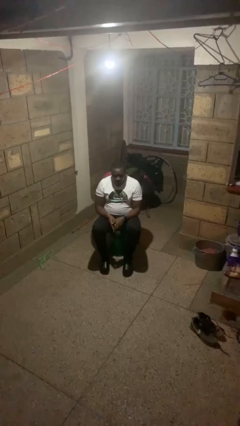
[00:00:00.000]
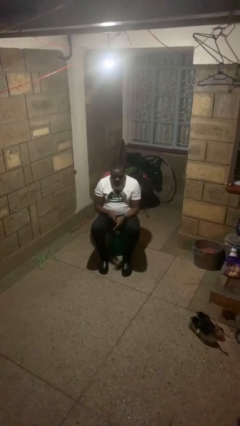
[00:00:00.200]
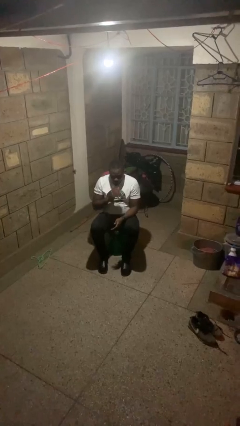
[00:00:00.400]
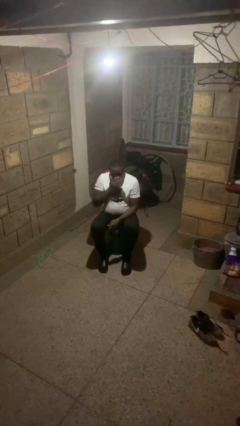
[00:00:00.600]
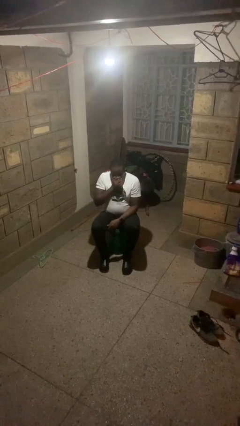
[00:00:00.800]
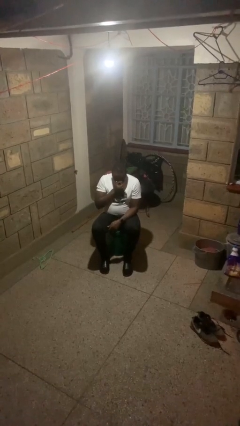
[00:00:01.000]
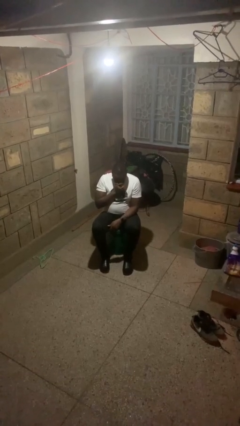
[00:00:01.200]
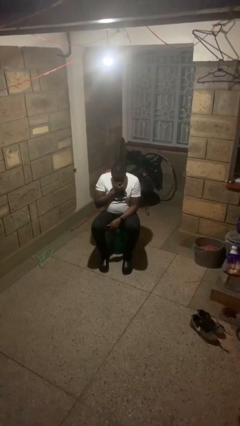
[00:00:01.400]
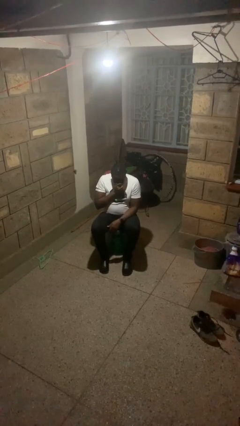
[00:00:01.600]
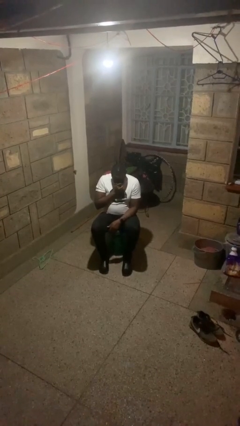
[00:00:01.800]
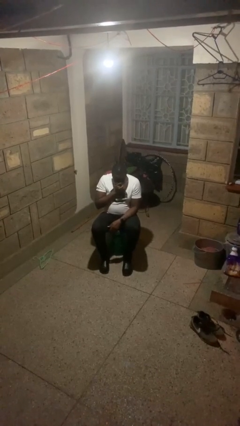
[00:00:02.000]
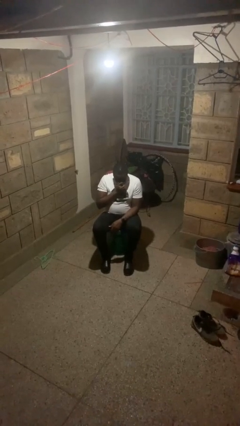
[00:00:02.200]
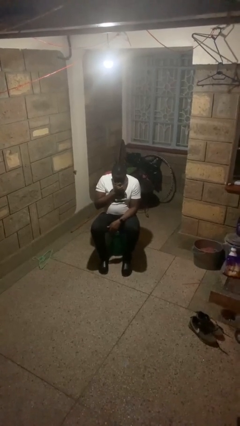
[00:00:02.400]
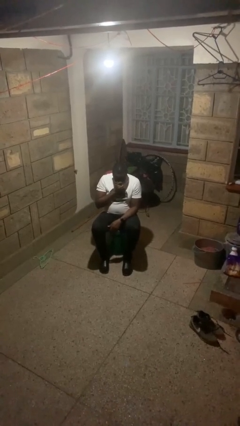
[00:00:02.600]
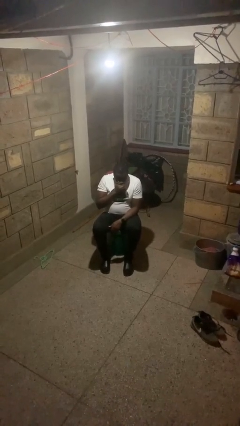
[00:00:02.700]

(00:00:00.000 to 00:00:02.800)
person sneezes into hand

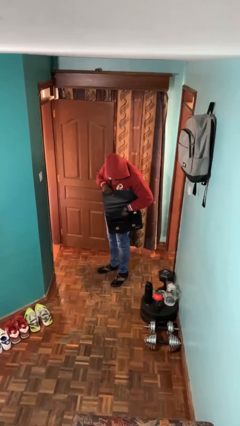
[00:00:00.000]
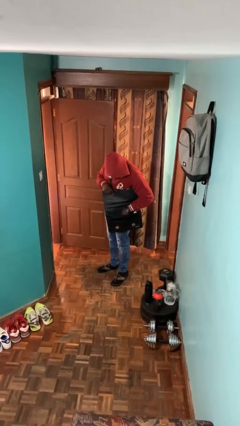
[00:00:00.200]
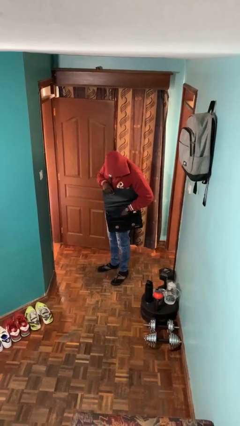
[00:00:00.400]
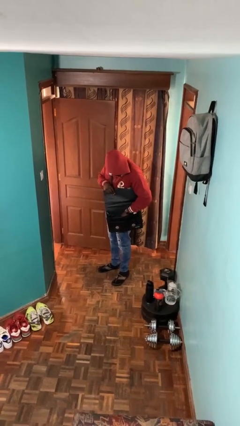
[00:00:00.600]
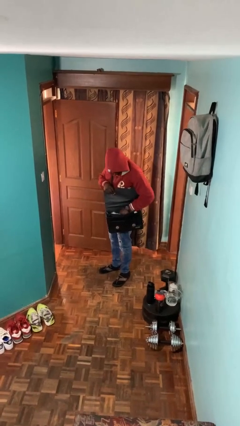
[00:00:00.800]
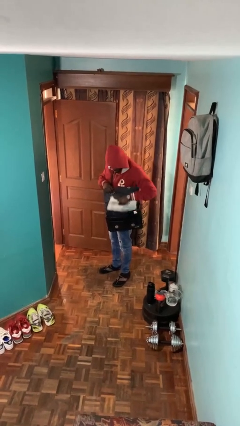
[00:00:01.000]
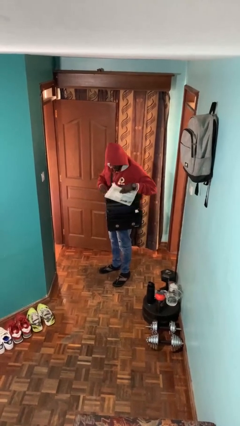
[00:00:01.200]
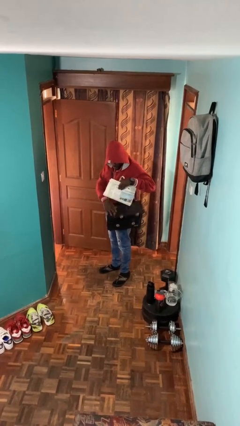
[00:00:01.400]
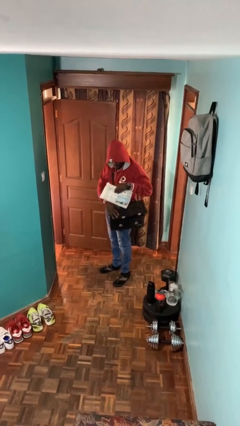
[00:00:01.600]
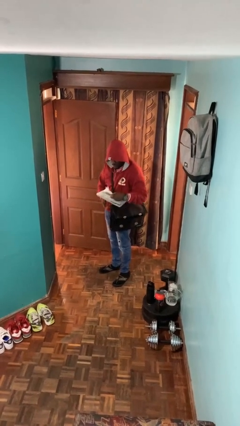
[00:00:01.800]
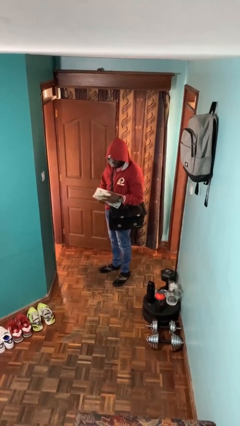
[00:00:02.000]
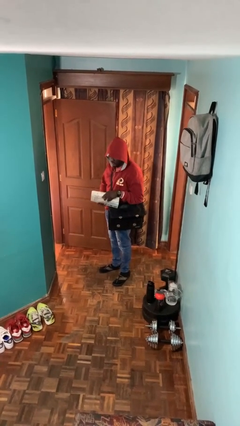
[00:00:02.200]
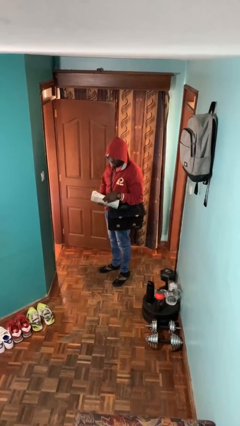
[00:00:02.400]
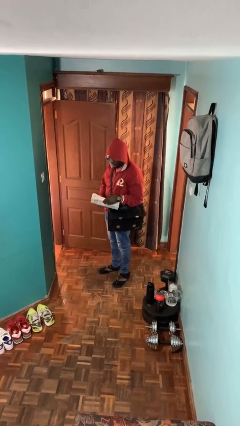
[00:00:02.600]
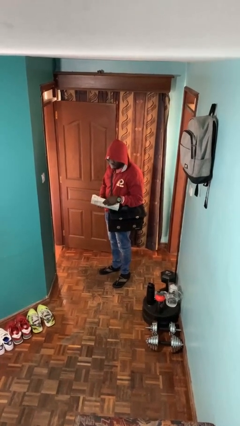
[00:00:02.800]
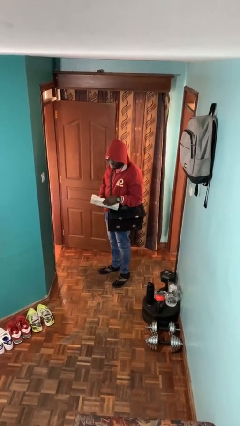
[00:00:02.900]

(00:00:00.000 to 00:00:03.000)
person takes object from purse

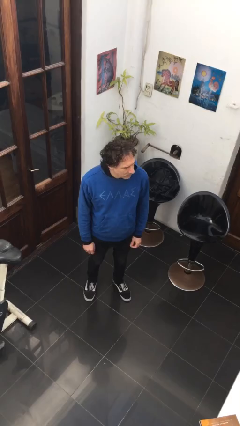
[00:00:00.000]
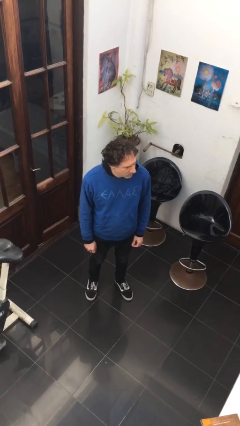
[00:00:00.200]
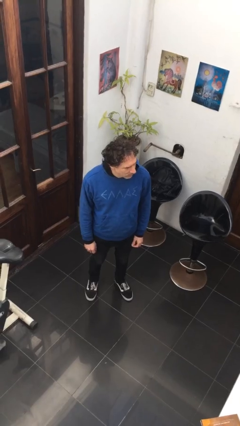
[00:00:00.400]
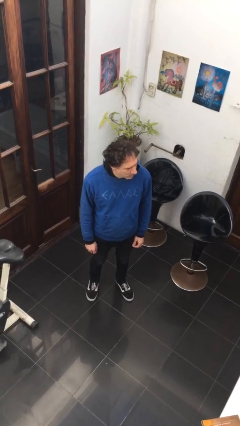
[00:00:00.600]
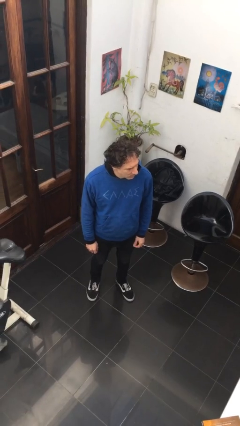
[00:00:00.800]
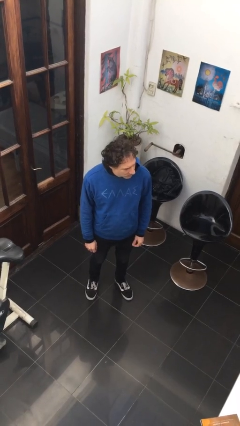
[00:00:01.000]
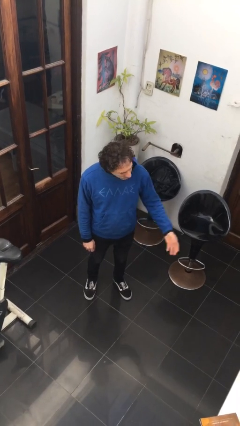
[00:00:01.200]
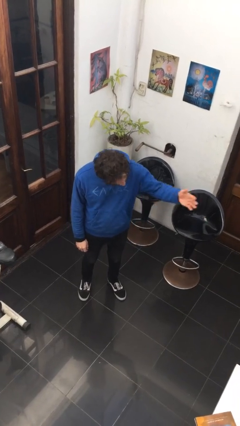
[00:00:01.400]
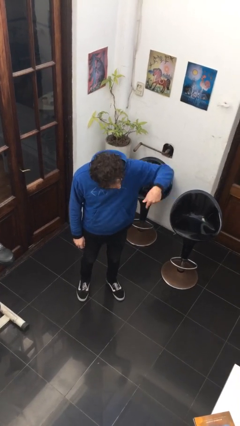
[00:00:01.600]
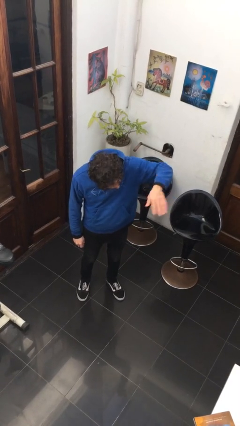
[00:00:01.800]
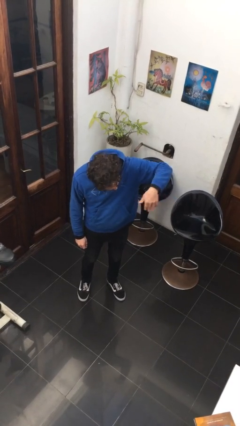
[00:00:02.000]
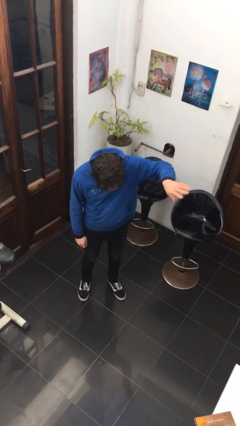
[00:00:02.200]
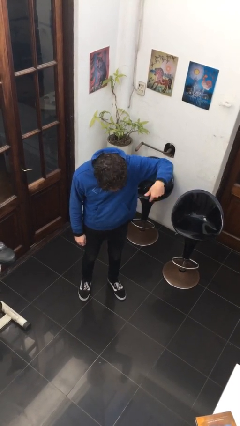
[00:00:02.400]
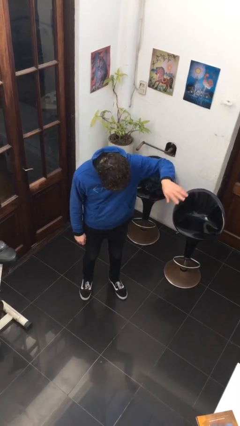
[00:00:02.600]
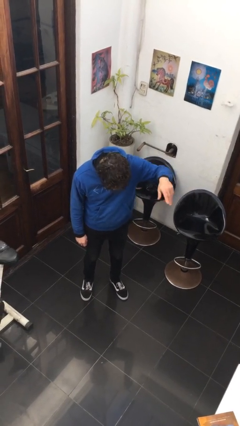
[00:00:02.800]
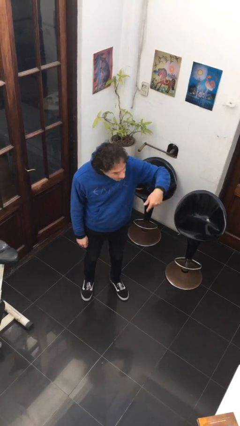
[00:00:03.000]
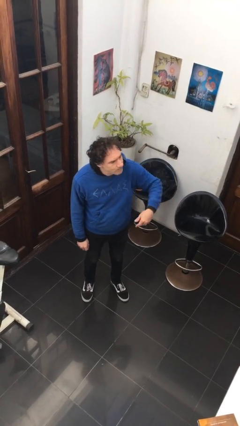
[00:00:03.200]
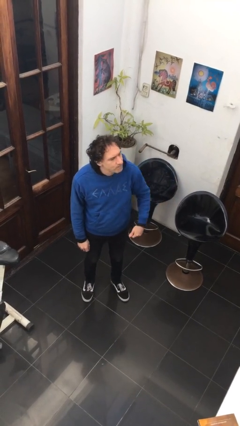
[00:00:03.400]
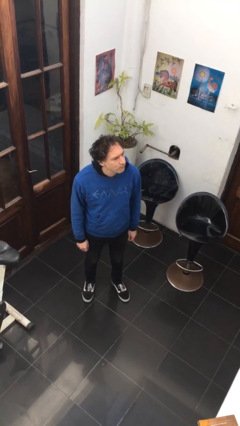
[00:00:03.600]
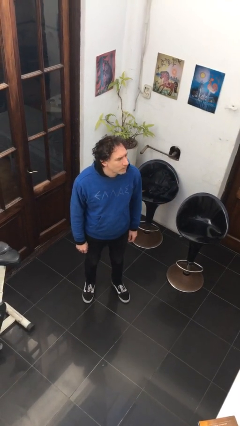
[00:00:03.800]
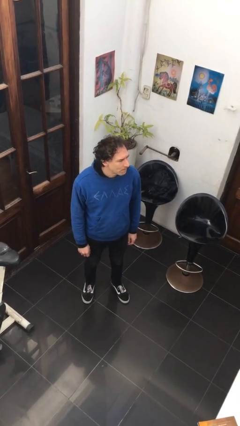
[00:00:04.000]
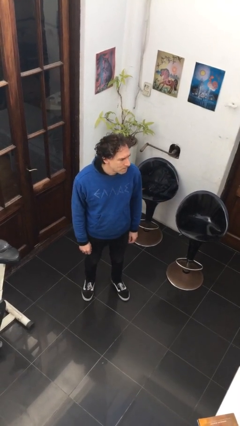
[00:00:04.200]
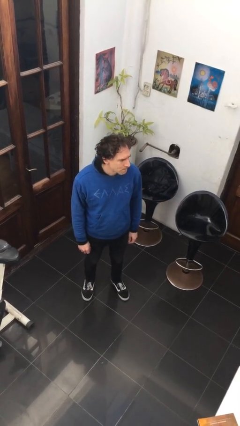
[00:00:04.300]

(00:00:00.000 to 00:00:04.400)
person gestures come here

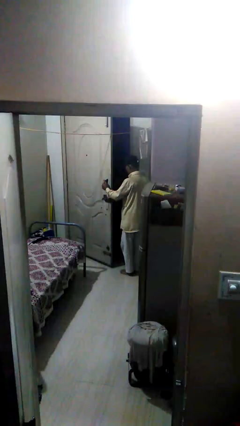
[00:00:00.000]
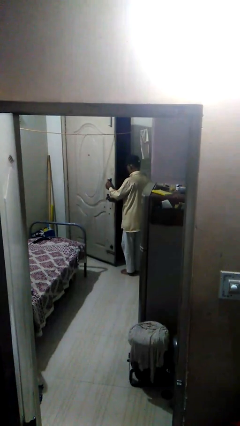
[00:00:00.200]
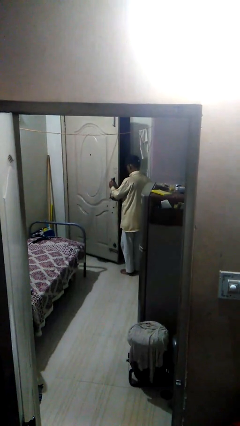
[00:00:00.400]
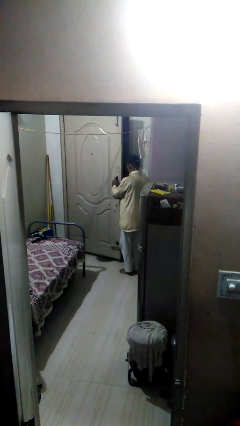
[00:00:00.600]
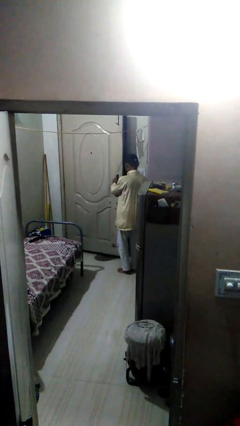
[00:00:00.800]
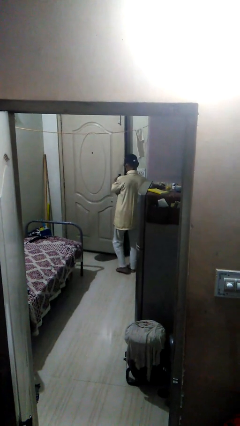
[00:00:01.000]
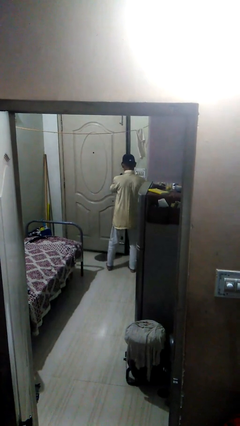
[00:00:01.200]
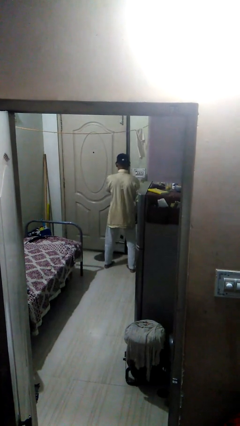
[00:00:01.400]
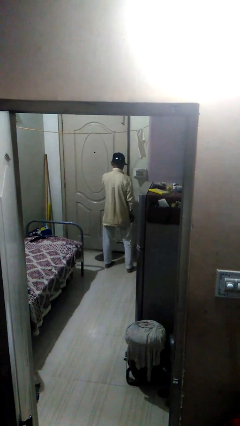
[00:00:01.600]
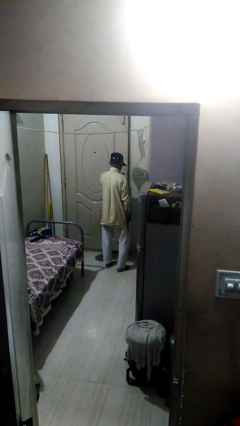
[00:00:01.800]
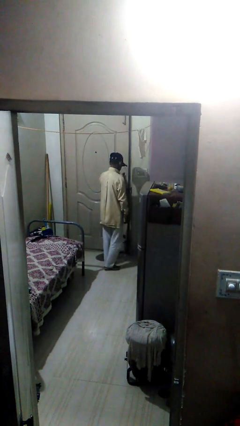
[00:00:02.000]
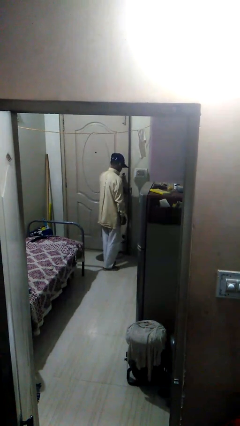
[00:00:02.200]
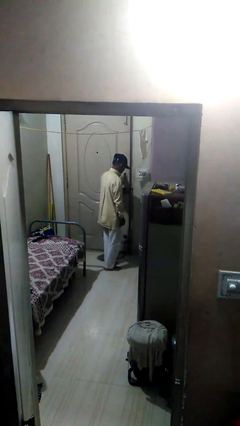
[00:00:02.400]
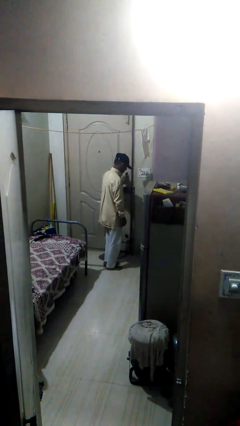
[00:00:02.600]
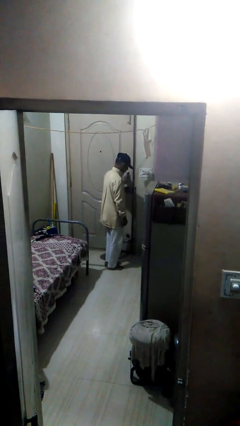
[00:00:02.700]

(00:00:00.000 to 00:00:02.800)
person closes facility door

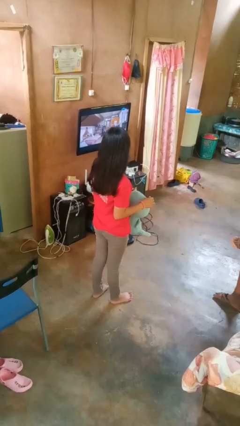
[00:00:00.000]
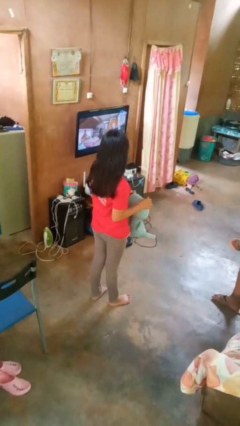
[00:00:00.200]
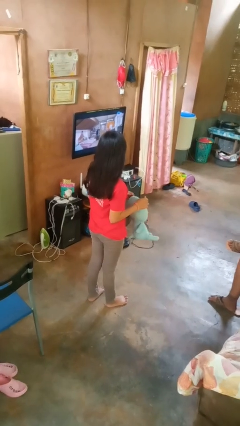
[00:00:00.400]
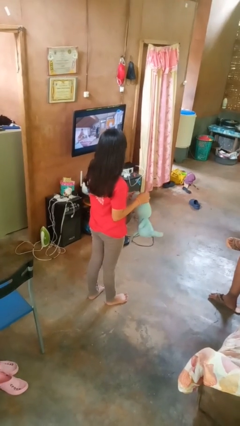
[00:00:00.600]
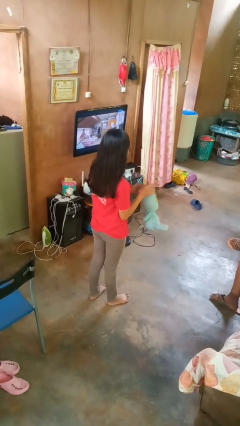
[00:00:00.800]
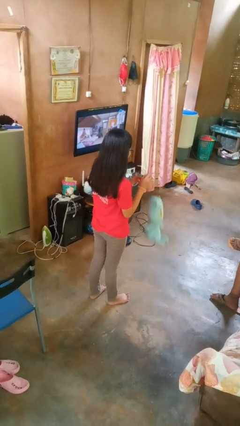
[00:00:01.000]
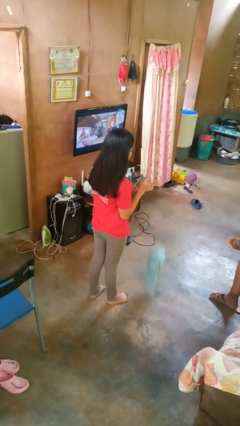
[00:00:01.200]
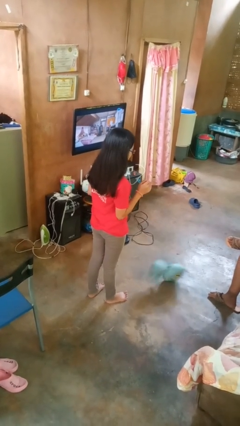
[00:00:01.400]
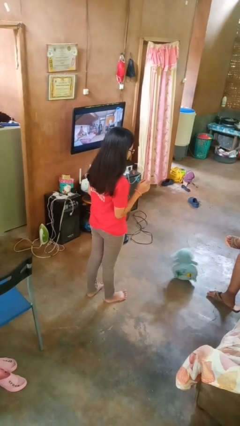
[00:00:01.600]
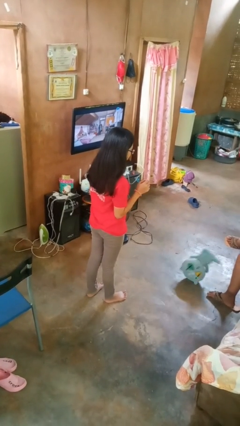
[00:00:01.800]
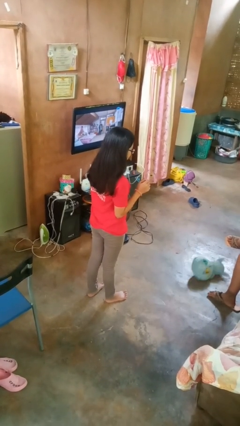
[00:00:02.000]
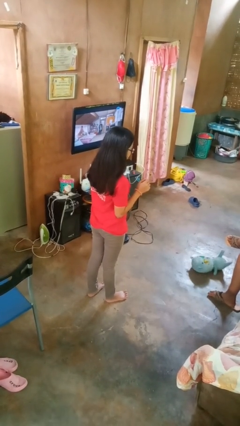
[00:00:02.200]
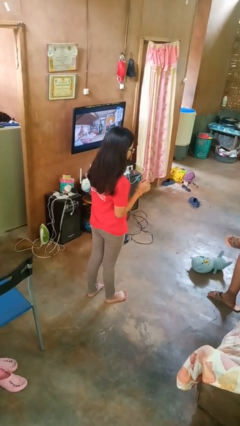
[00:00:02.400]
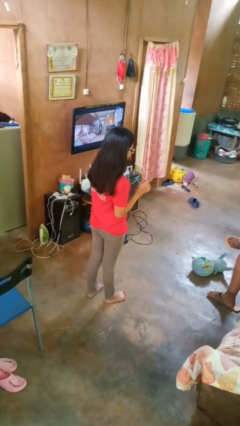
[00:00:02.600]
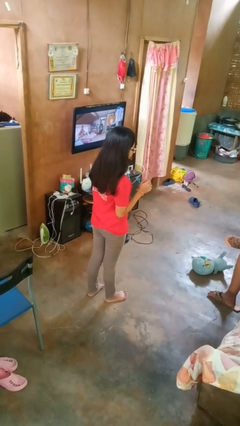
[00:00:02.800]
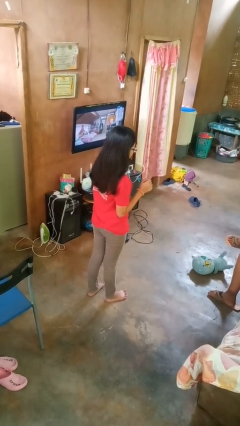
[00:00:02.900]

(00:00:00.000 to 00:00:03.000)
person drops object

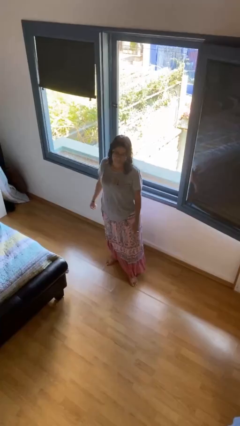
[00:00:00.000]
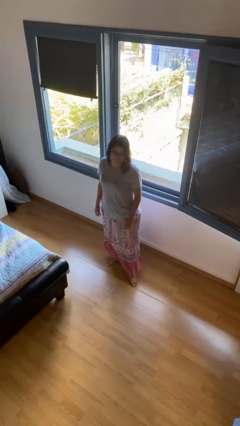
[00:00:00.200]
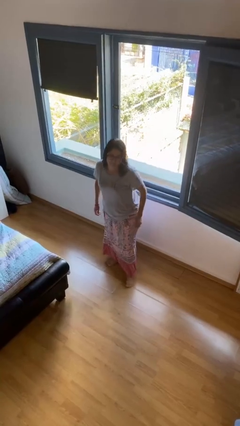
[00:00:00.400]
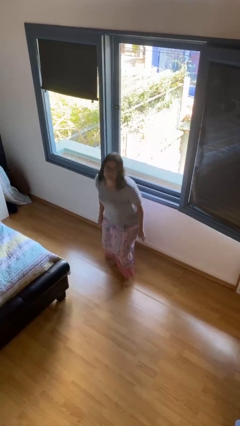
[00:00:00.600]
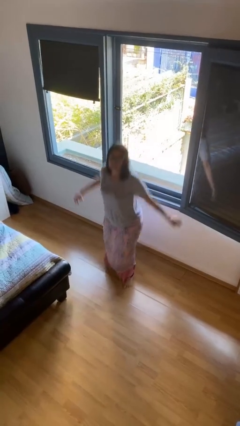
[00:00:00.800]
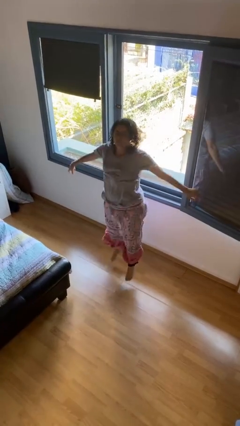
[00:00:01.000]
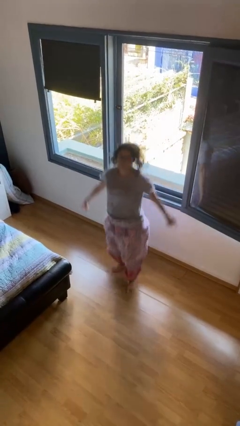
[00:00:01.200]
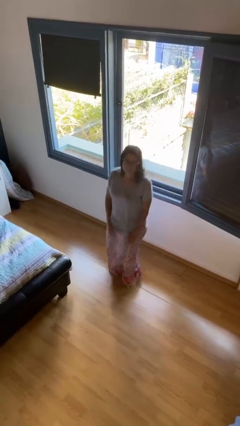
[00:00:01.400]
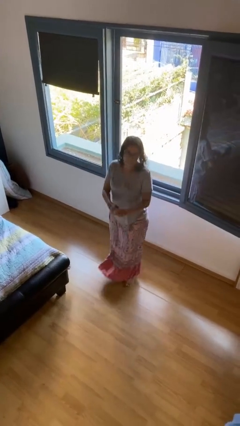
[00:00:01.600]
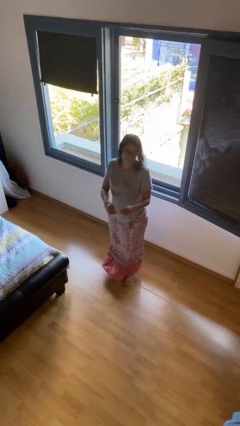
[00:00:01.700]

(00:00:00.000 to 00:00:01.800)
person jumps
